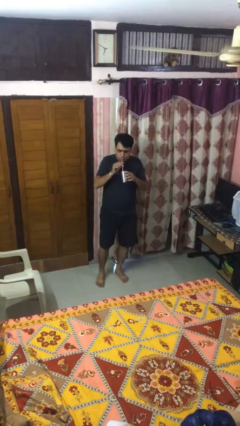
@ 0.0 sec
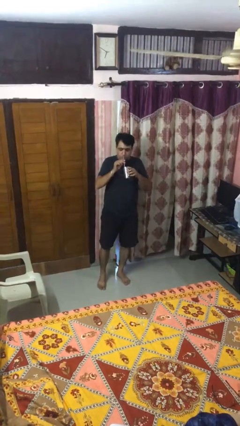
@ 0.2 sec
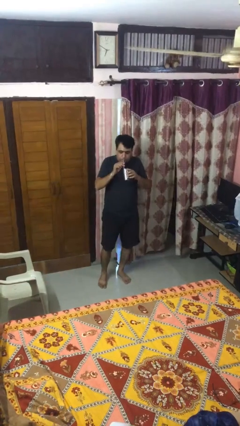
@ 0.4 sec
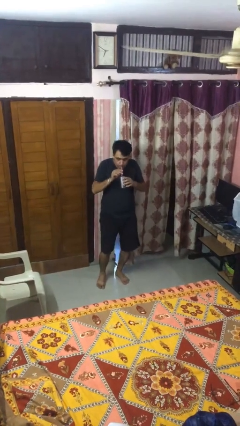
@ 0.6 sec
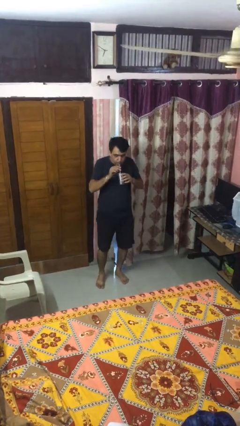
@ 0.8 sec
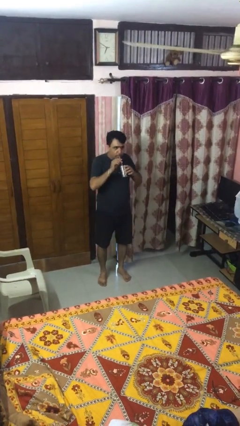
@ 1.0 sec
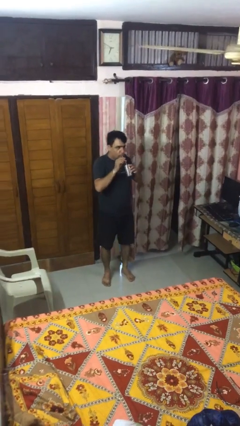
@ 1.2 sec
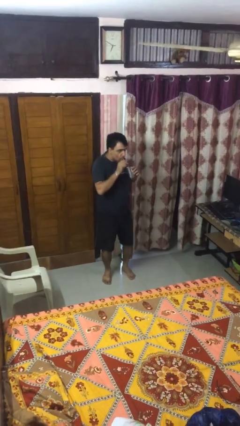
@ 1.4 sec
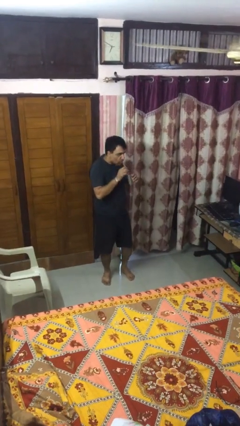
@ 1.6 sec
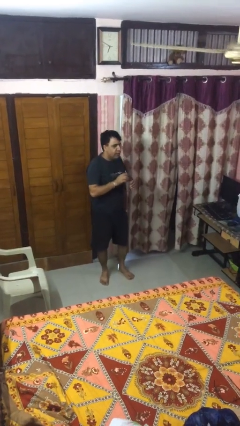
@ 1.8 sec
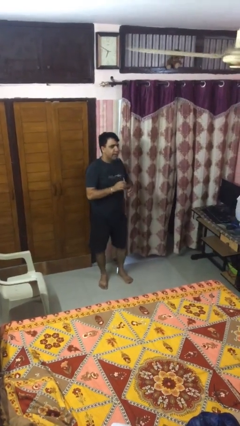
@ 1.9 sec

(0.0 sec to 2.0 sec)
person drinks from straw

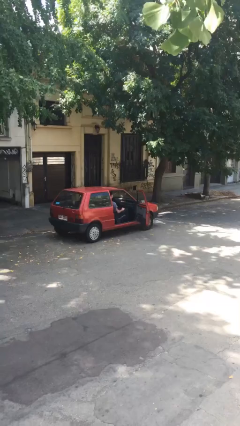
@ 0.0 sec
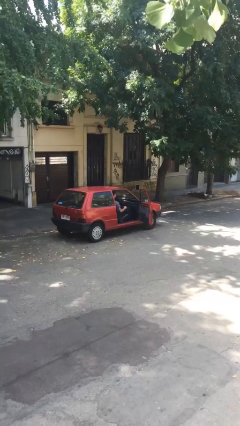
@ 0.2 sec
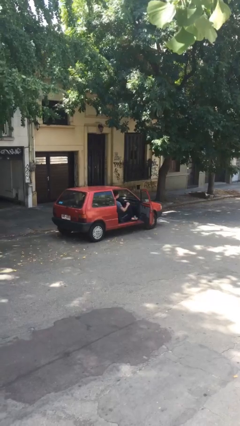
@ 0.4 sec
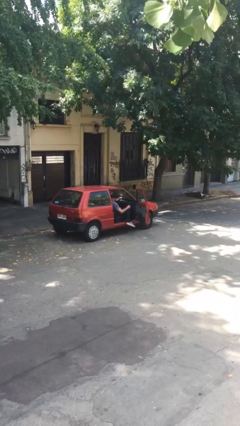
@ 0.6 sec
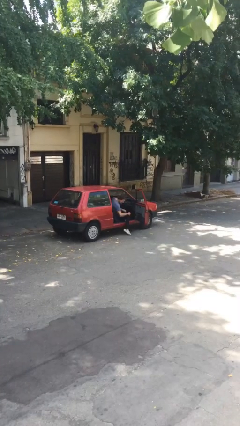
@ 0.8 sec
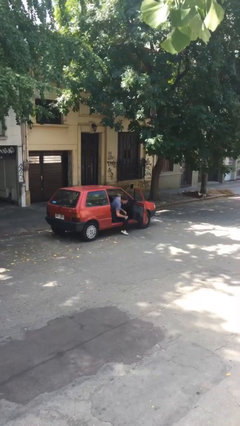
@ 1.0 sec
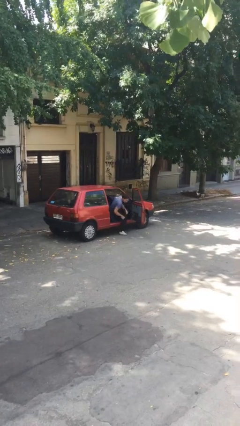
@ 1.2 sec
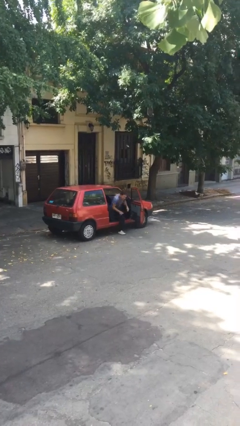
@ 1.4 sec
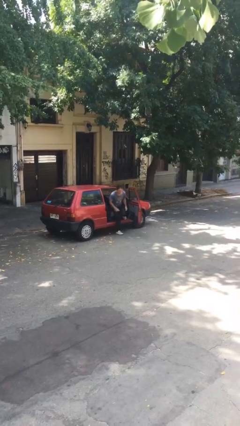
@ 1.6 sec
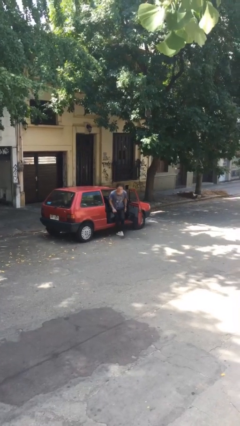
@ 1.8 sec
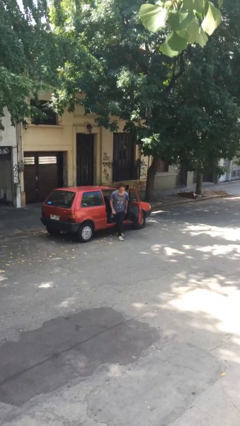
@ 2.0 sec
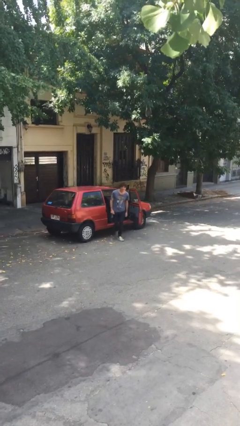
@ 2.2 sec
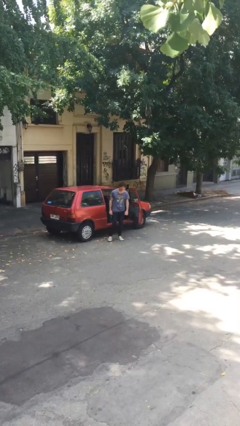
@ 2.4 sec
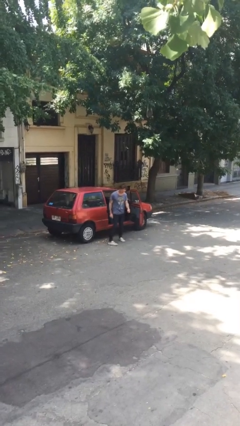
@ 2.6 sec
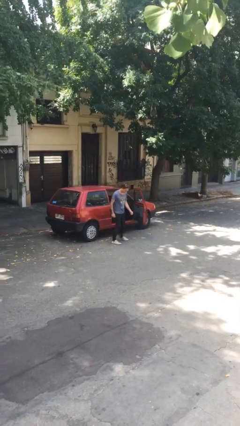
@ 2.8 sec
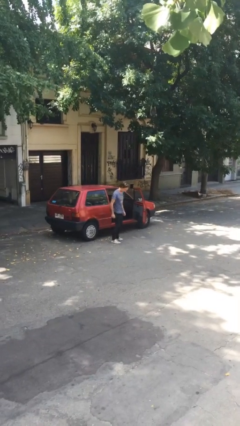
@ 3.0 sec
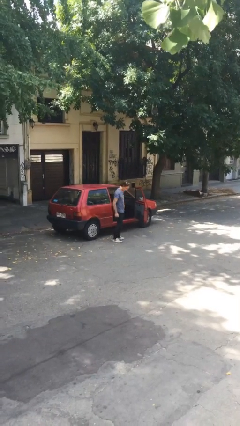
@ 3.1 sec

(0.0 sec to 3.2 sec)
person exits car

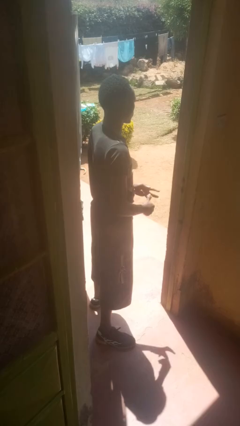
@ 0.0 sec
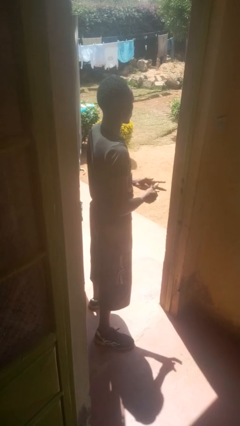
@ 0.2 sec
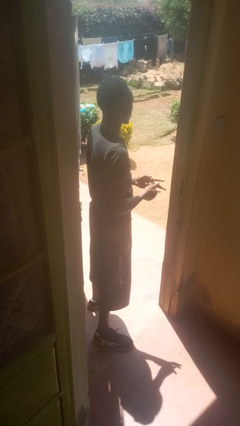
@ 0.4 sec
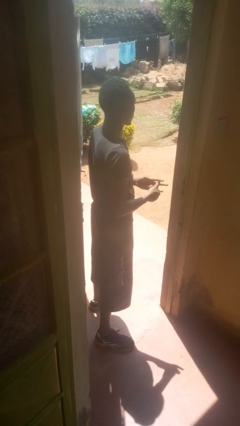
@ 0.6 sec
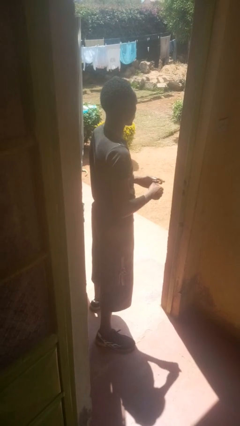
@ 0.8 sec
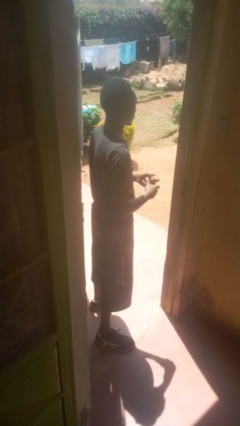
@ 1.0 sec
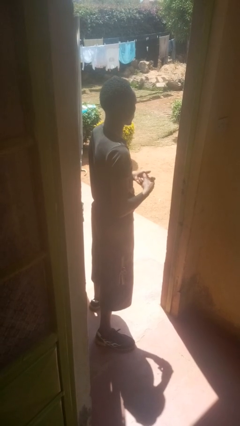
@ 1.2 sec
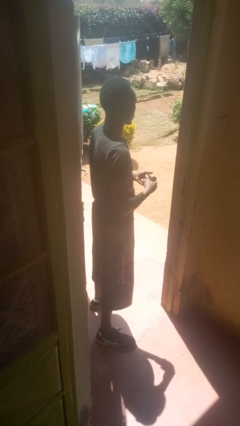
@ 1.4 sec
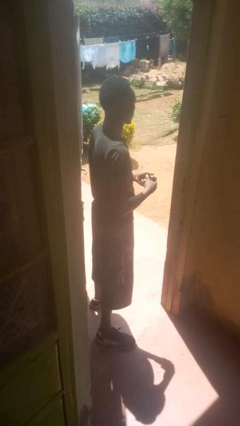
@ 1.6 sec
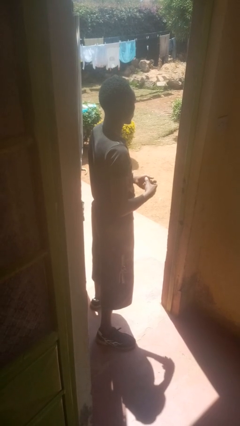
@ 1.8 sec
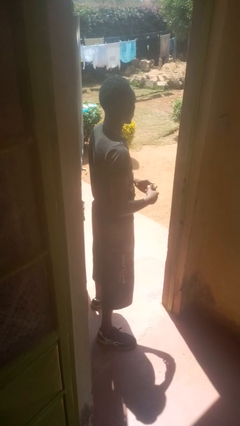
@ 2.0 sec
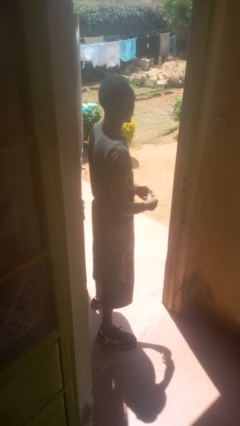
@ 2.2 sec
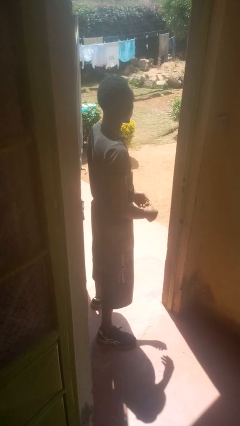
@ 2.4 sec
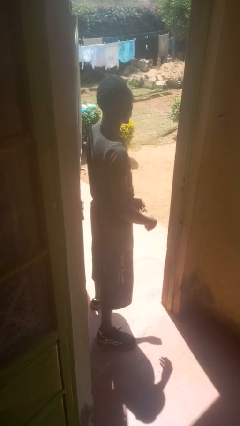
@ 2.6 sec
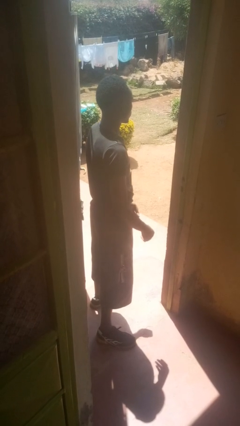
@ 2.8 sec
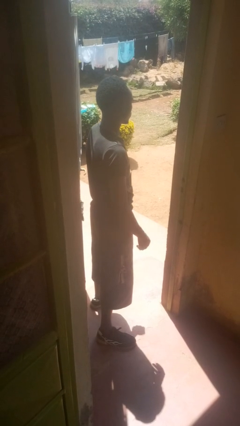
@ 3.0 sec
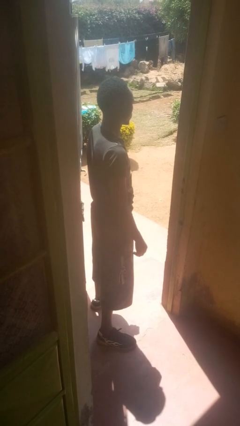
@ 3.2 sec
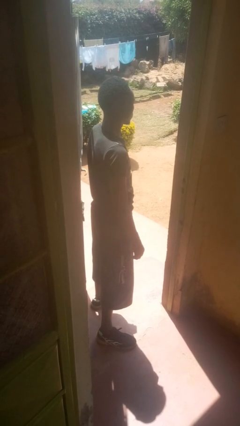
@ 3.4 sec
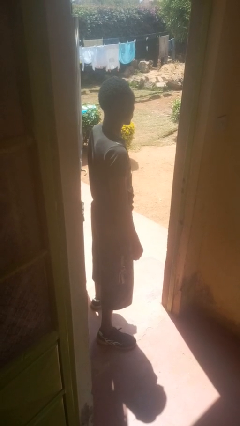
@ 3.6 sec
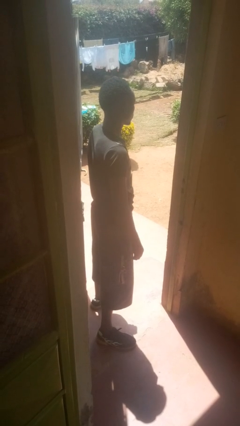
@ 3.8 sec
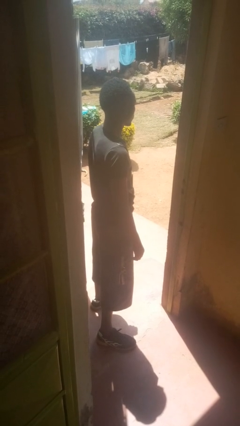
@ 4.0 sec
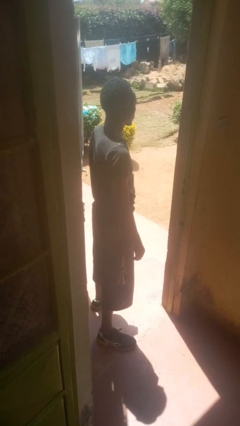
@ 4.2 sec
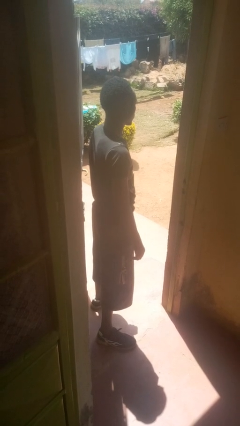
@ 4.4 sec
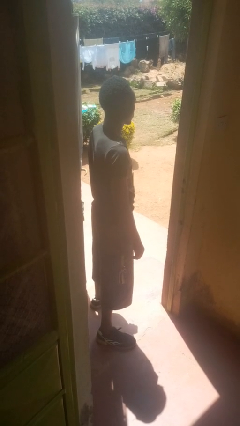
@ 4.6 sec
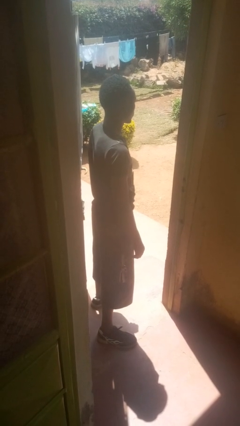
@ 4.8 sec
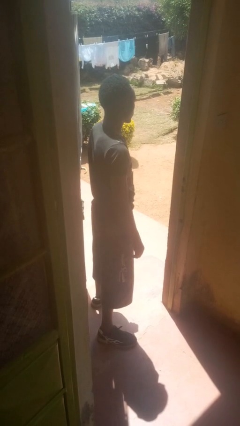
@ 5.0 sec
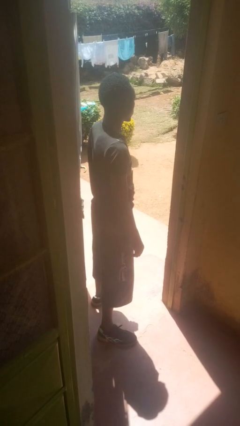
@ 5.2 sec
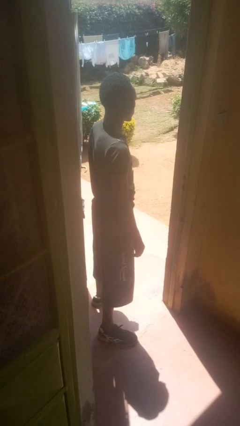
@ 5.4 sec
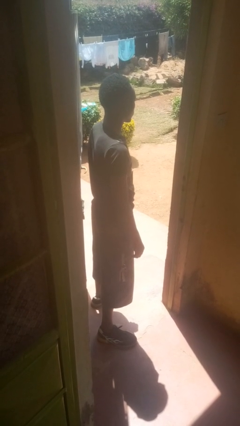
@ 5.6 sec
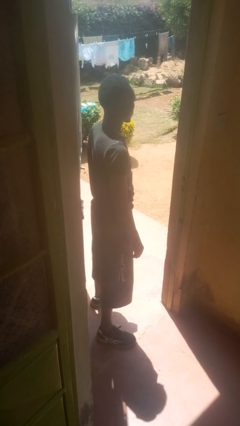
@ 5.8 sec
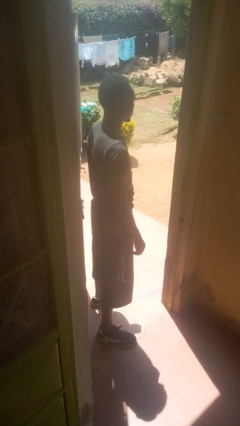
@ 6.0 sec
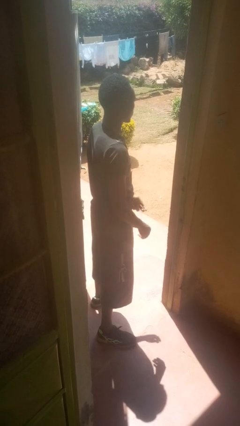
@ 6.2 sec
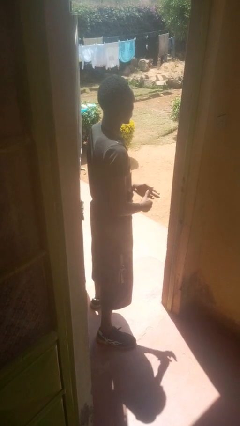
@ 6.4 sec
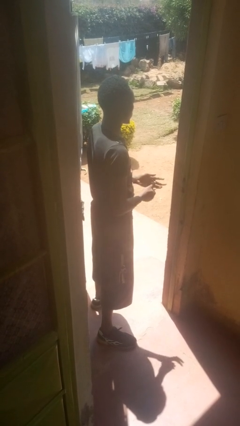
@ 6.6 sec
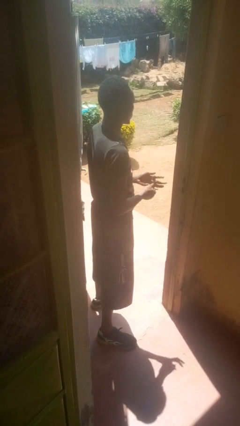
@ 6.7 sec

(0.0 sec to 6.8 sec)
person cracks knuckles

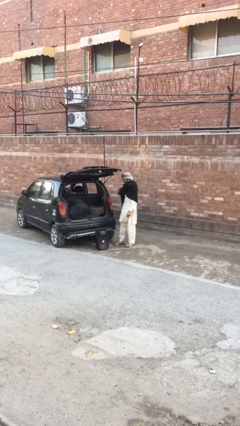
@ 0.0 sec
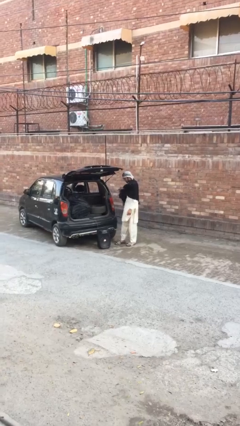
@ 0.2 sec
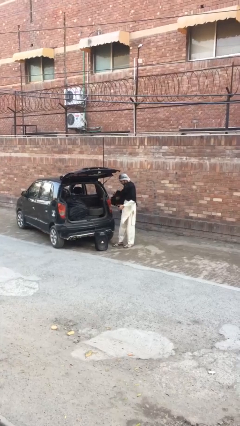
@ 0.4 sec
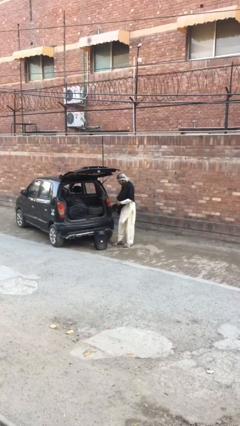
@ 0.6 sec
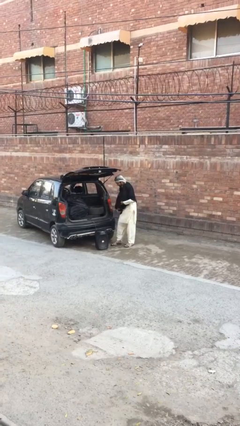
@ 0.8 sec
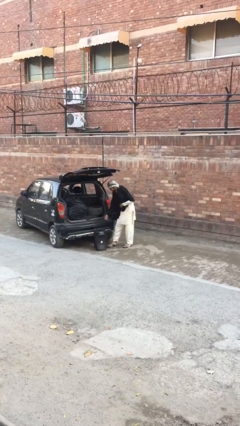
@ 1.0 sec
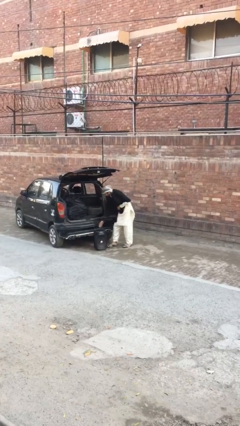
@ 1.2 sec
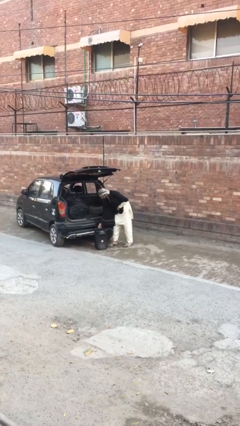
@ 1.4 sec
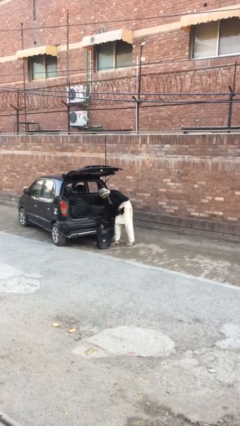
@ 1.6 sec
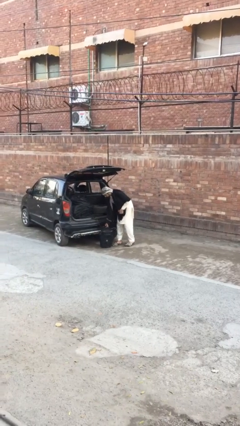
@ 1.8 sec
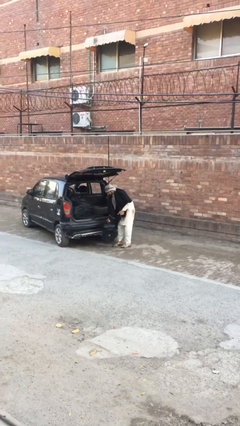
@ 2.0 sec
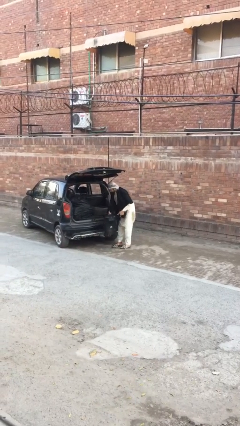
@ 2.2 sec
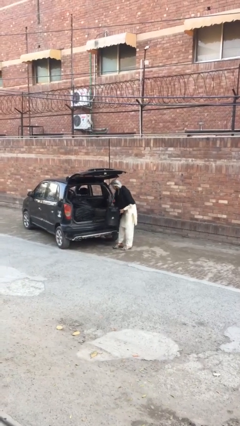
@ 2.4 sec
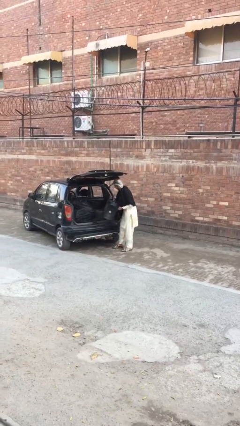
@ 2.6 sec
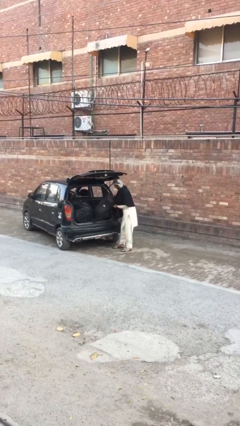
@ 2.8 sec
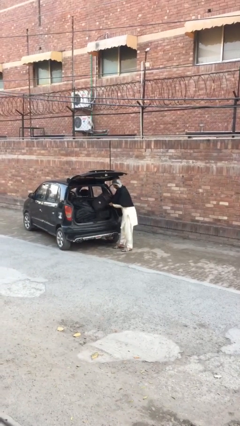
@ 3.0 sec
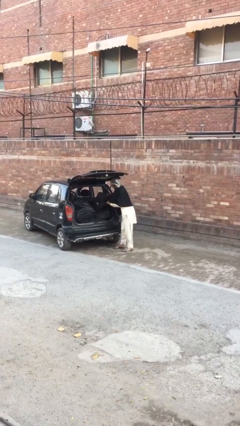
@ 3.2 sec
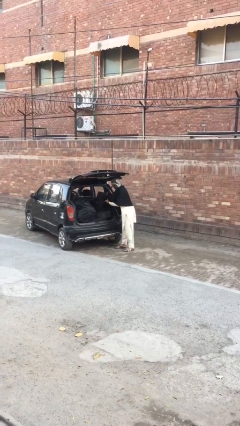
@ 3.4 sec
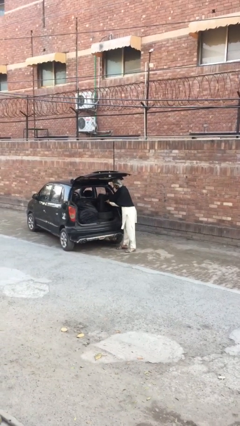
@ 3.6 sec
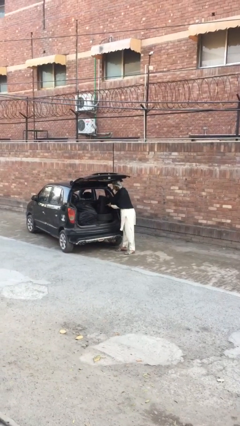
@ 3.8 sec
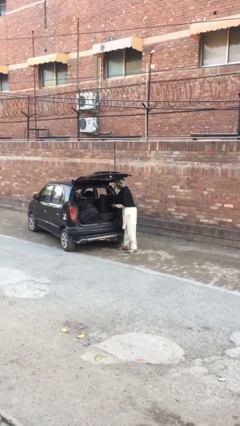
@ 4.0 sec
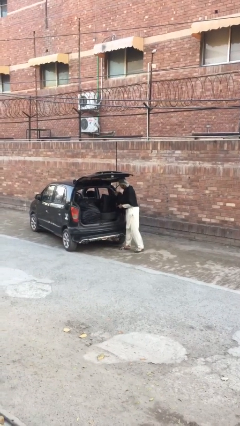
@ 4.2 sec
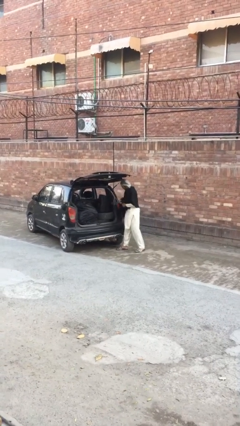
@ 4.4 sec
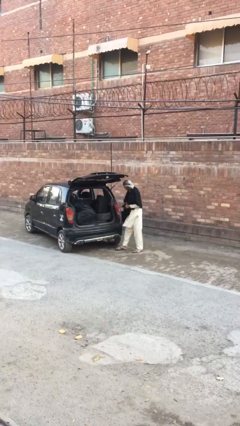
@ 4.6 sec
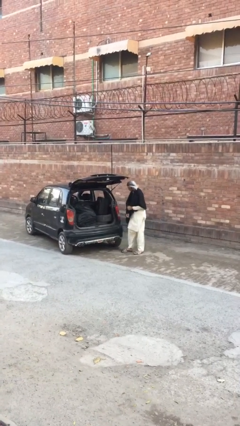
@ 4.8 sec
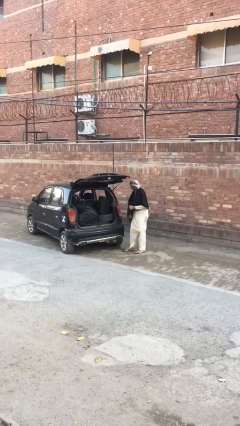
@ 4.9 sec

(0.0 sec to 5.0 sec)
person loads car

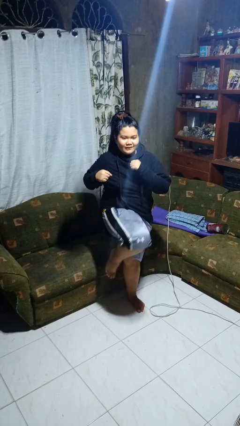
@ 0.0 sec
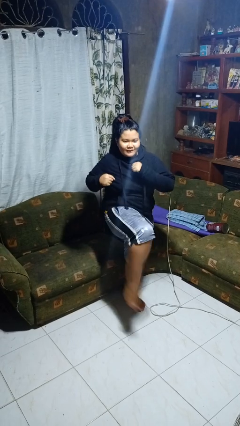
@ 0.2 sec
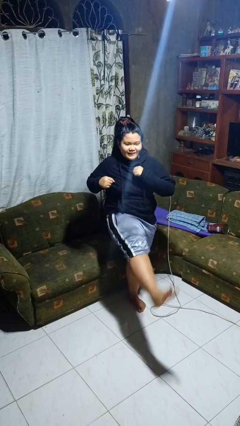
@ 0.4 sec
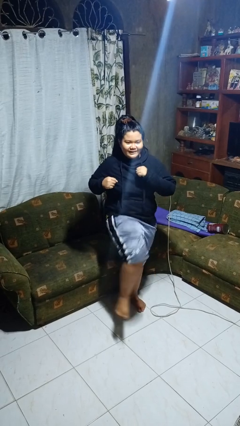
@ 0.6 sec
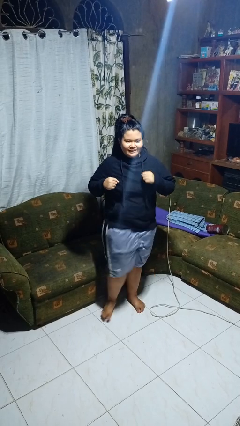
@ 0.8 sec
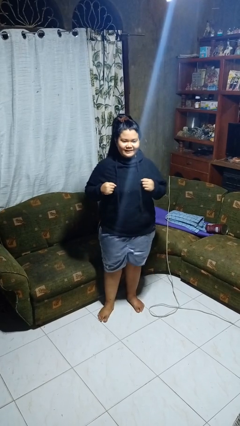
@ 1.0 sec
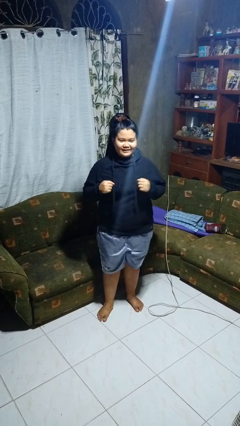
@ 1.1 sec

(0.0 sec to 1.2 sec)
person karate kicks
